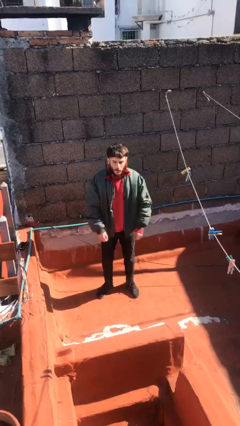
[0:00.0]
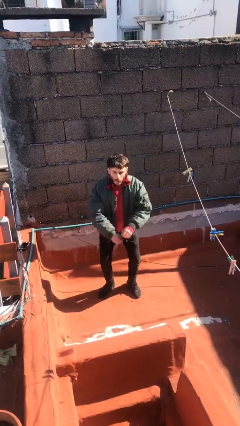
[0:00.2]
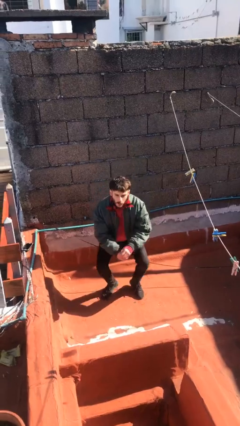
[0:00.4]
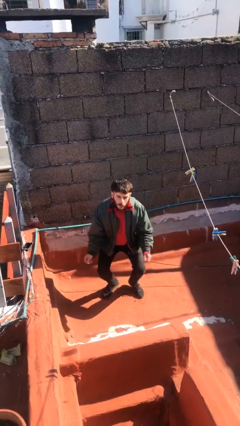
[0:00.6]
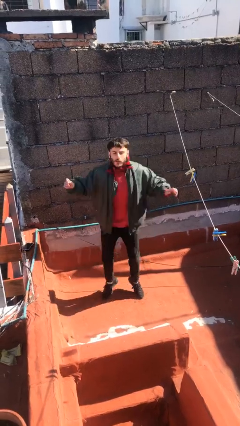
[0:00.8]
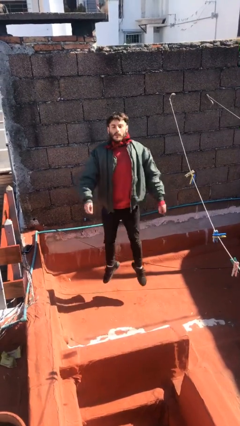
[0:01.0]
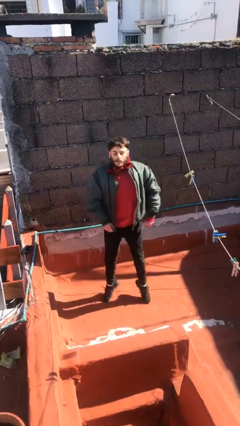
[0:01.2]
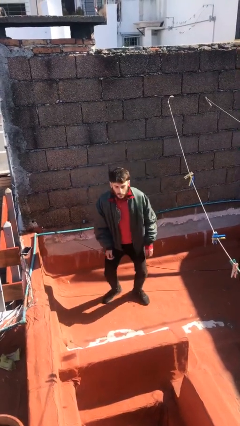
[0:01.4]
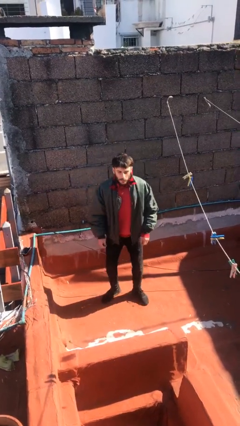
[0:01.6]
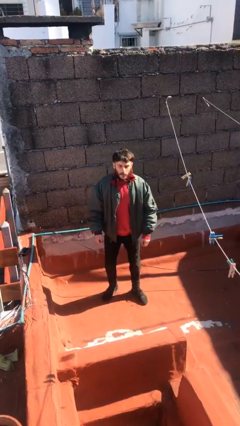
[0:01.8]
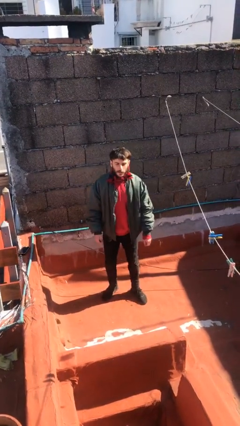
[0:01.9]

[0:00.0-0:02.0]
person jumps

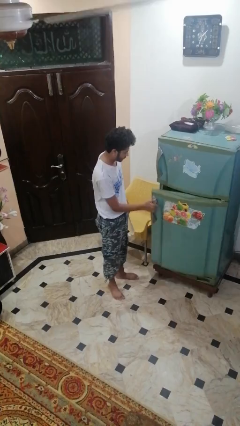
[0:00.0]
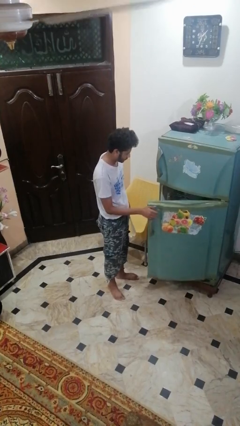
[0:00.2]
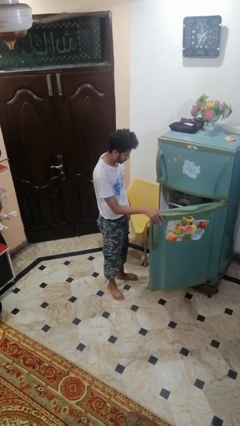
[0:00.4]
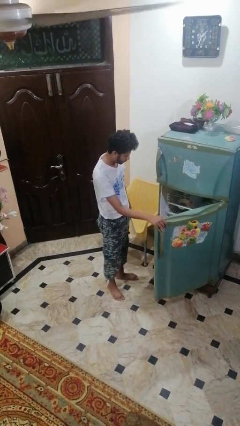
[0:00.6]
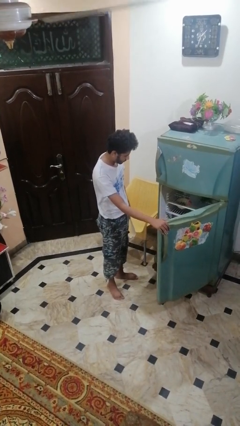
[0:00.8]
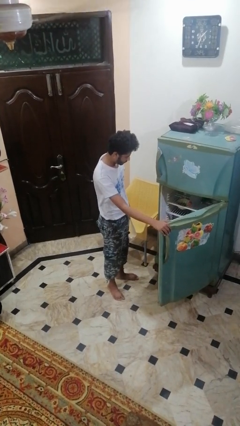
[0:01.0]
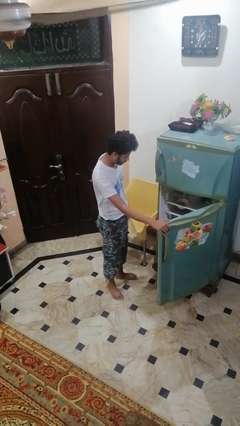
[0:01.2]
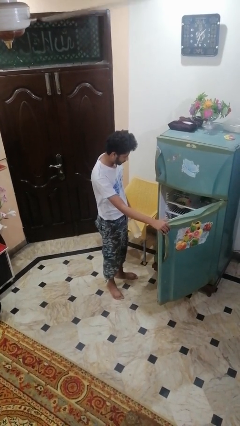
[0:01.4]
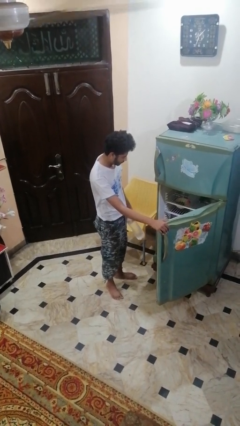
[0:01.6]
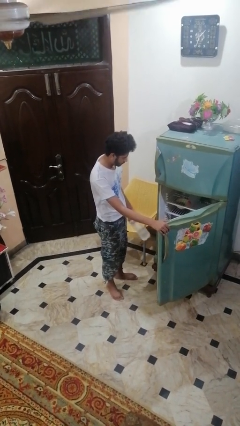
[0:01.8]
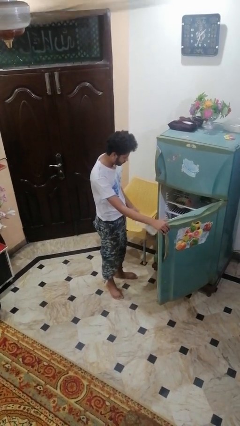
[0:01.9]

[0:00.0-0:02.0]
person opens refrigerator

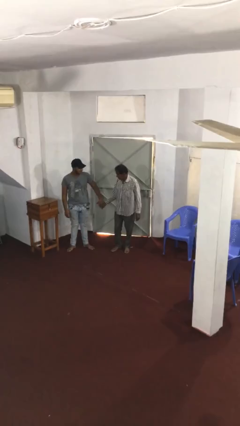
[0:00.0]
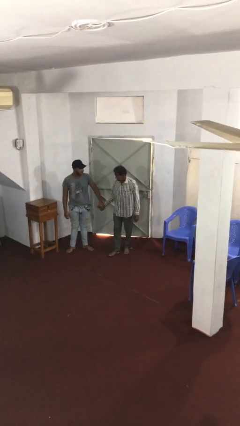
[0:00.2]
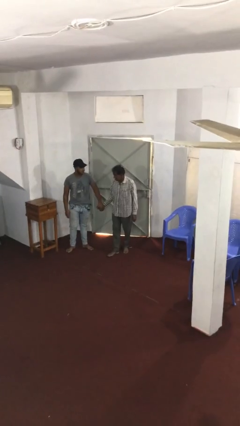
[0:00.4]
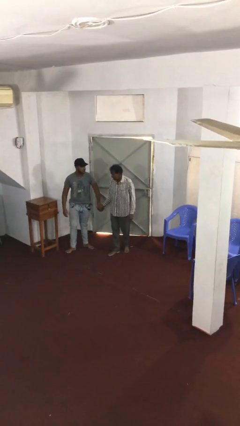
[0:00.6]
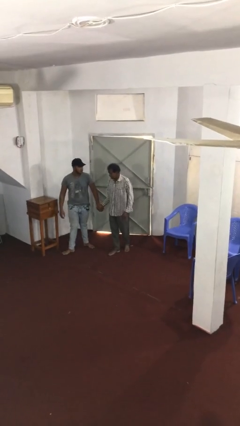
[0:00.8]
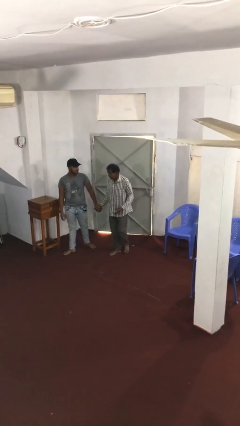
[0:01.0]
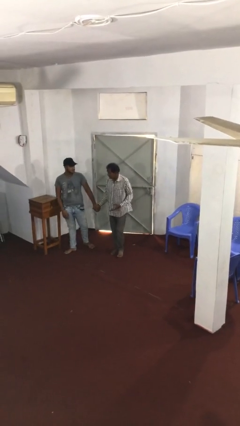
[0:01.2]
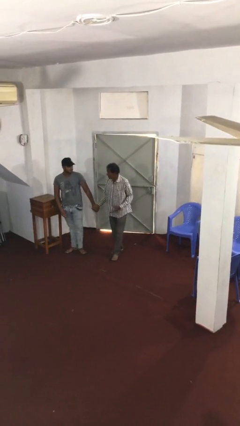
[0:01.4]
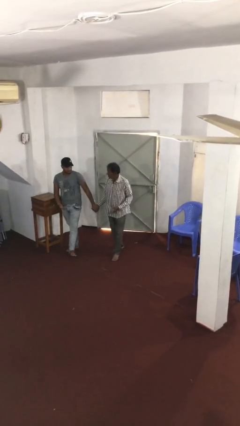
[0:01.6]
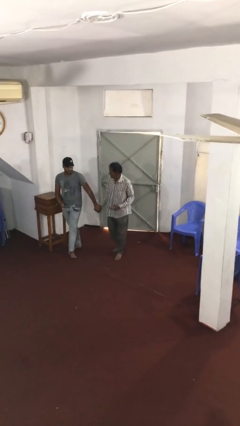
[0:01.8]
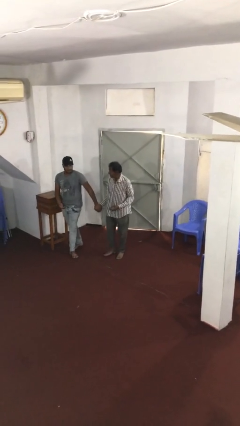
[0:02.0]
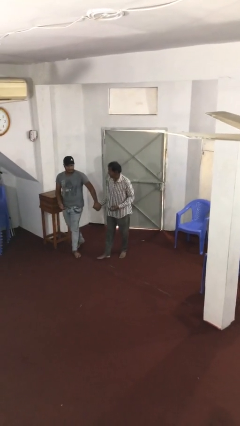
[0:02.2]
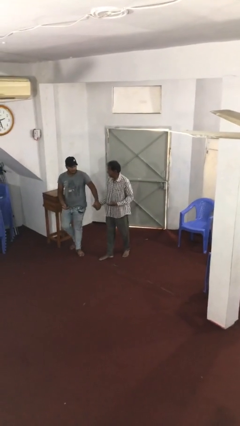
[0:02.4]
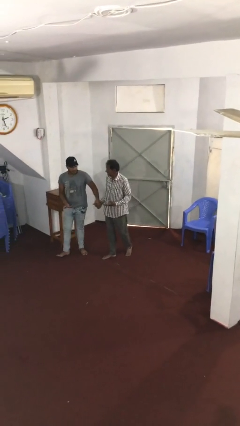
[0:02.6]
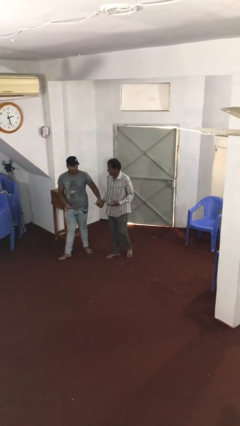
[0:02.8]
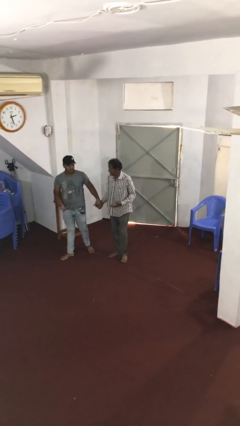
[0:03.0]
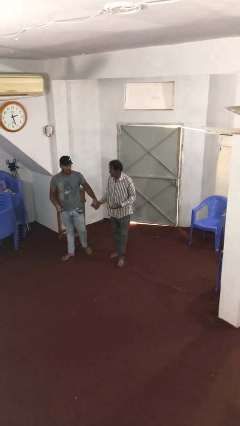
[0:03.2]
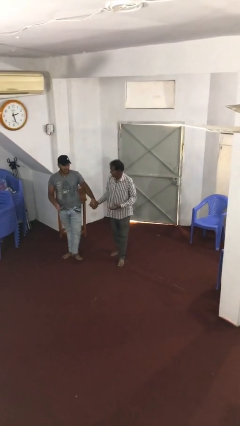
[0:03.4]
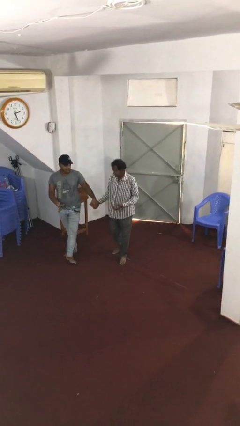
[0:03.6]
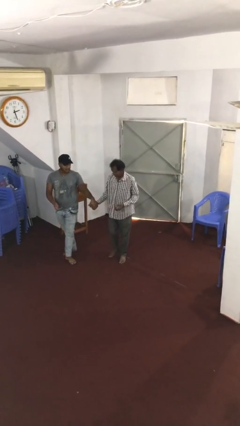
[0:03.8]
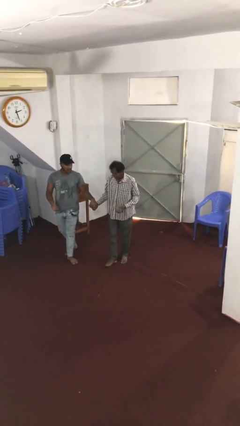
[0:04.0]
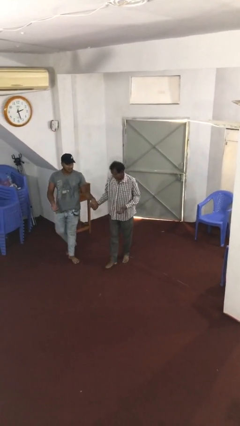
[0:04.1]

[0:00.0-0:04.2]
person holds hand

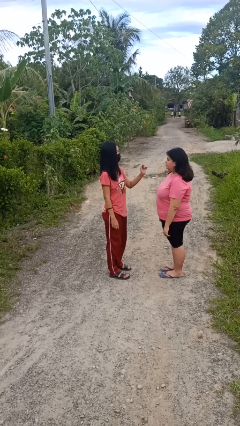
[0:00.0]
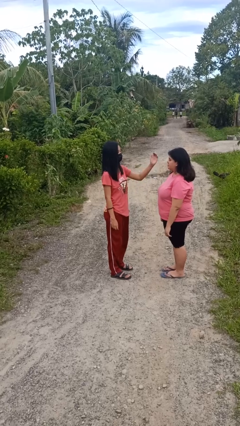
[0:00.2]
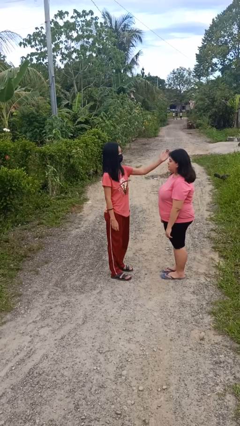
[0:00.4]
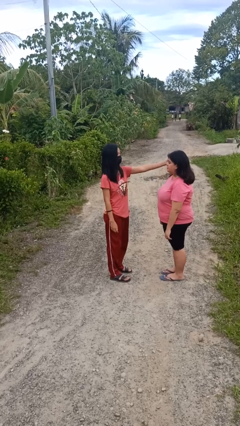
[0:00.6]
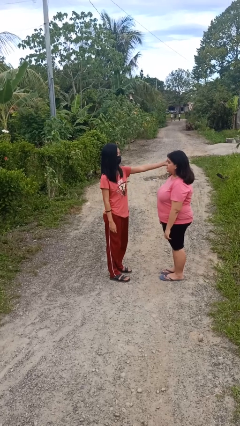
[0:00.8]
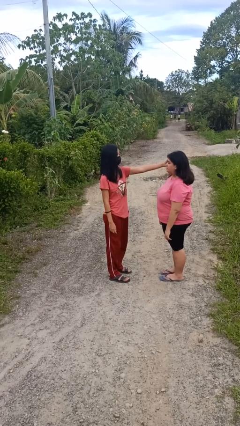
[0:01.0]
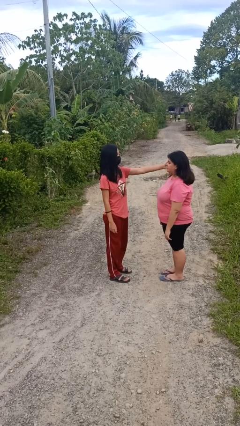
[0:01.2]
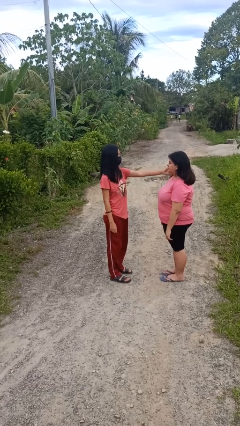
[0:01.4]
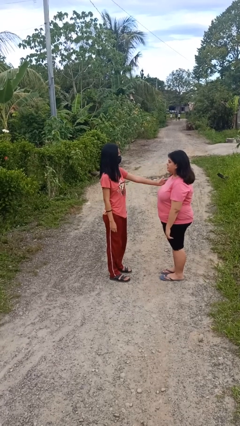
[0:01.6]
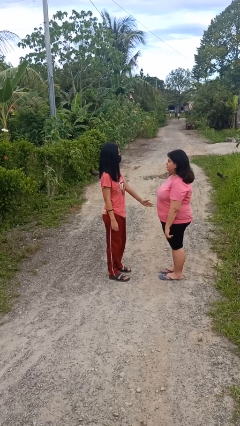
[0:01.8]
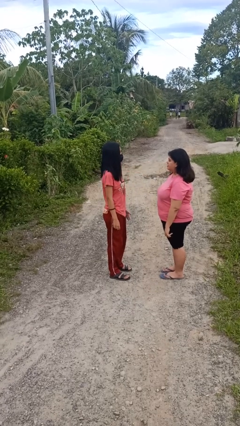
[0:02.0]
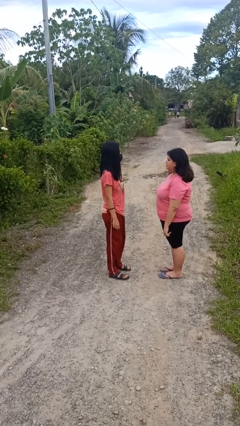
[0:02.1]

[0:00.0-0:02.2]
person touches face of person

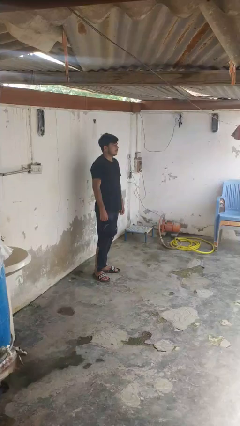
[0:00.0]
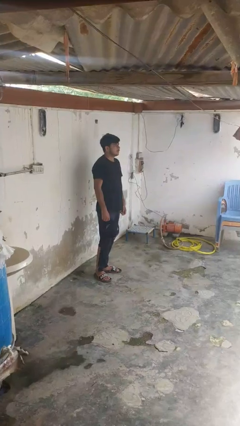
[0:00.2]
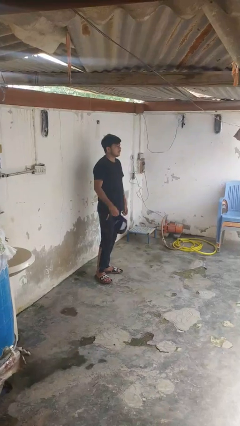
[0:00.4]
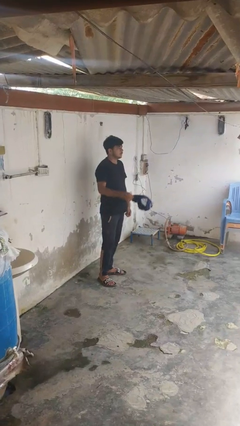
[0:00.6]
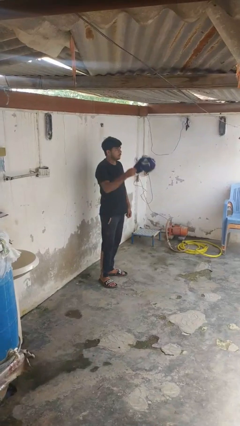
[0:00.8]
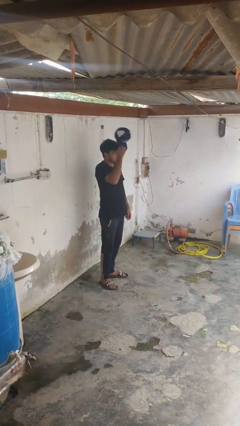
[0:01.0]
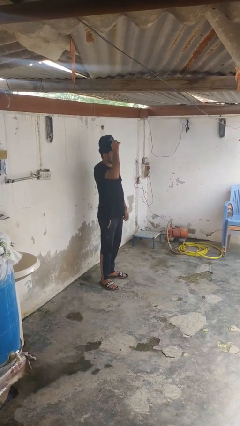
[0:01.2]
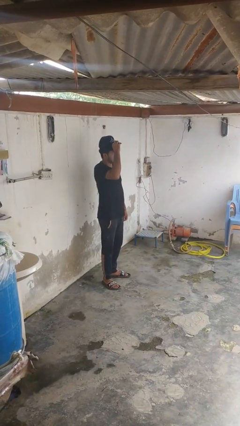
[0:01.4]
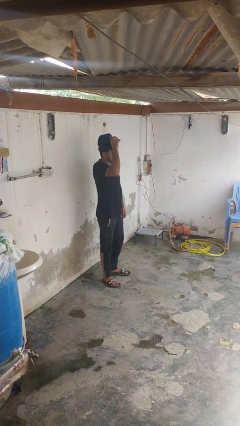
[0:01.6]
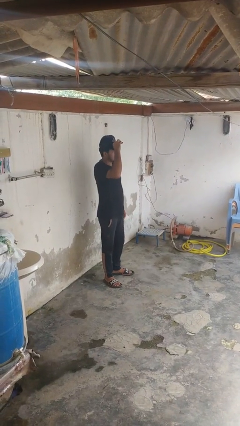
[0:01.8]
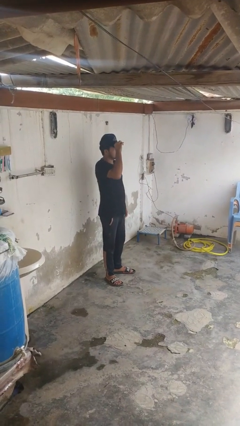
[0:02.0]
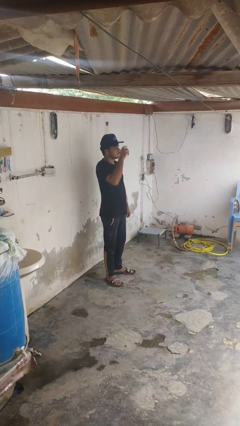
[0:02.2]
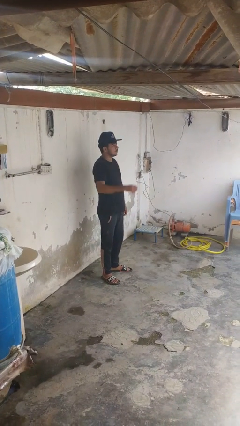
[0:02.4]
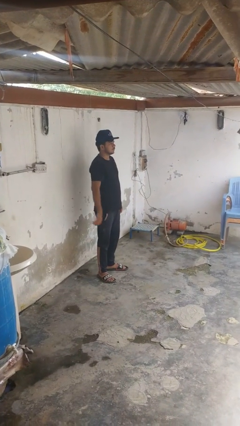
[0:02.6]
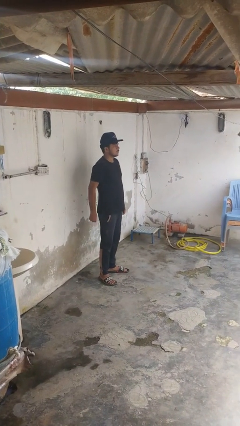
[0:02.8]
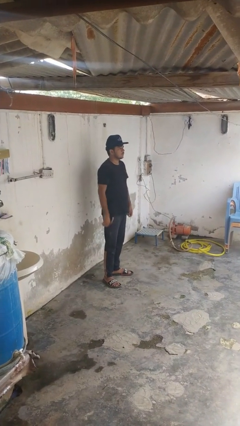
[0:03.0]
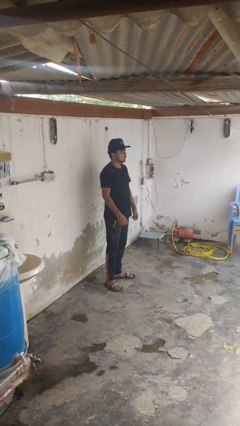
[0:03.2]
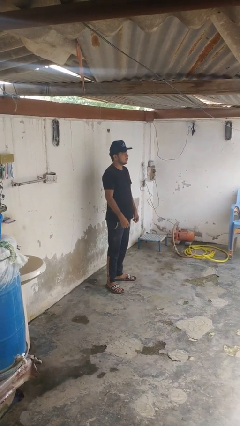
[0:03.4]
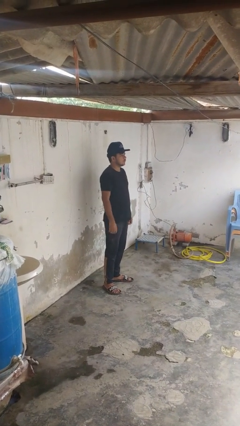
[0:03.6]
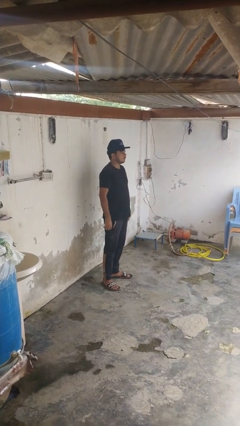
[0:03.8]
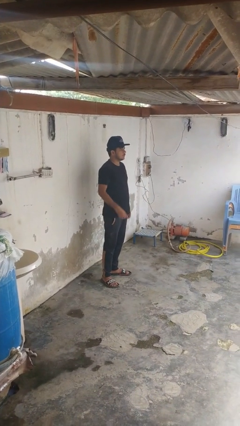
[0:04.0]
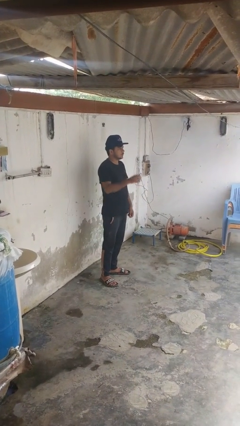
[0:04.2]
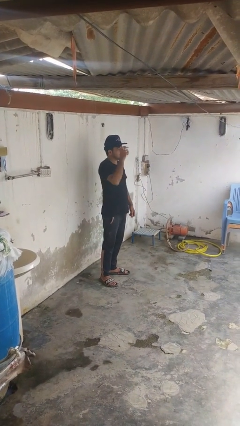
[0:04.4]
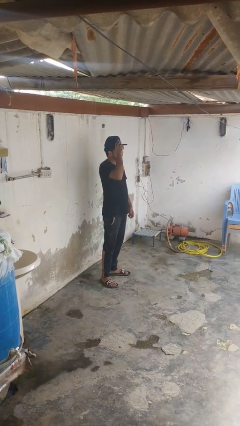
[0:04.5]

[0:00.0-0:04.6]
person puts on hat

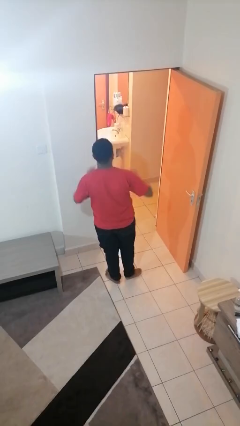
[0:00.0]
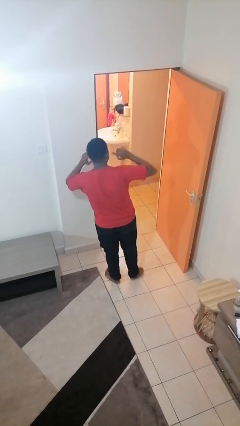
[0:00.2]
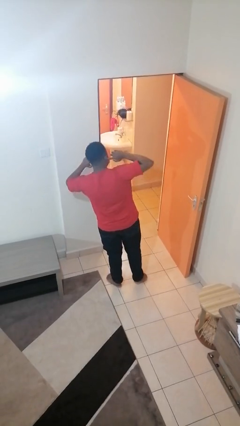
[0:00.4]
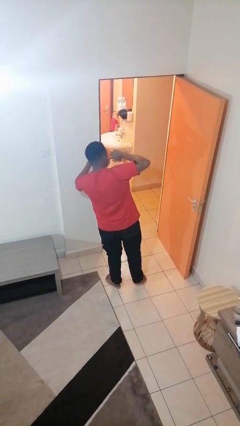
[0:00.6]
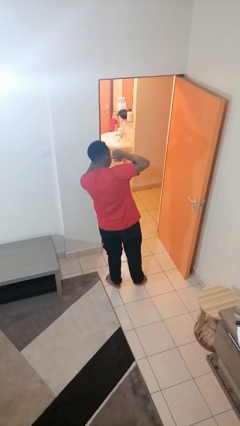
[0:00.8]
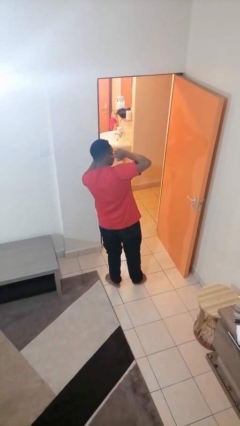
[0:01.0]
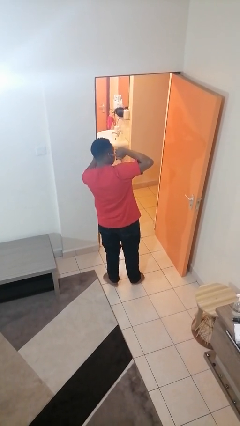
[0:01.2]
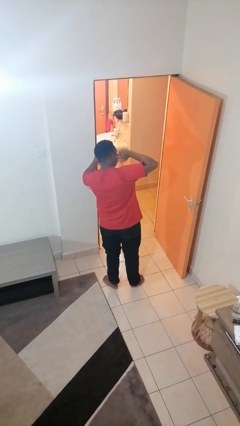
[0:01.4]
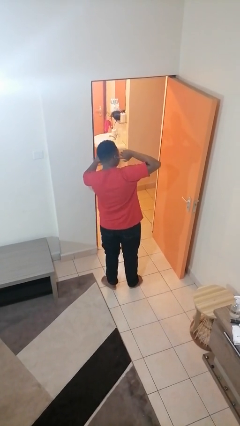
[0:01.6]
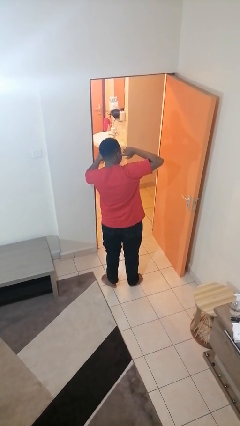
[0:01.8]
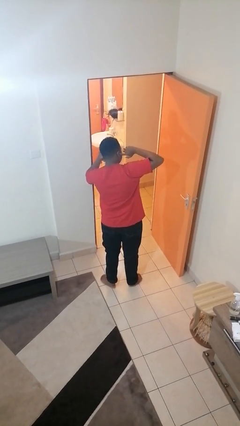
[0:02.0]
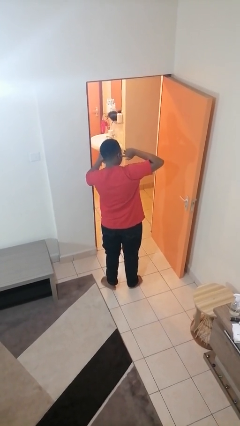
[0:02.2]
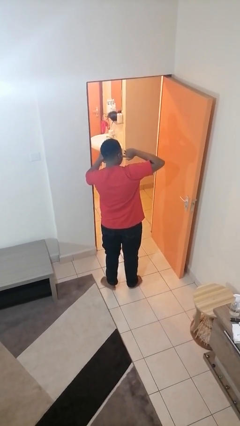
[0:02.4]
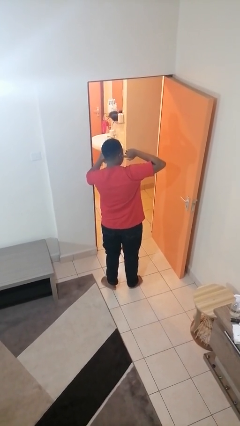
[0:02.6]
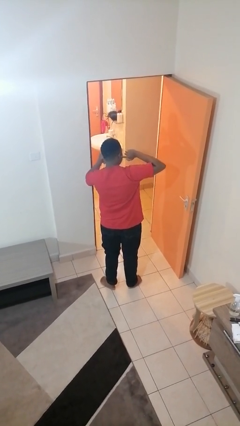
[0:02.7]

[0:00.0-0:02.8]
person puts fingers in ear
